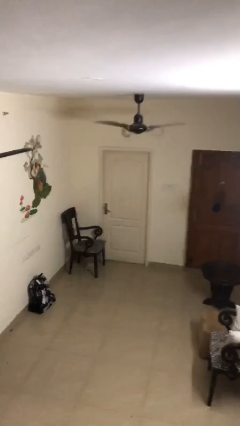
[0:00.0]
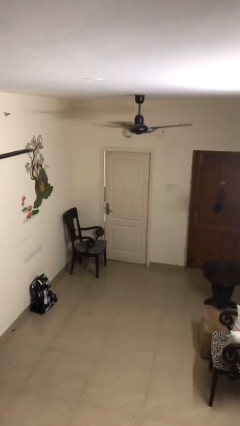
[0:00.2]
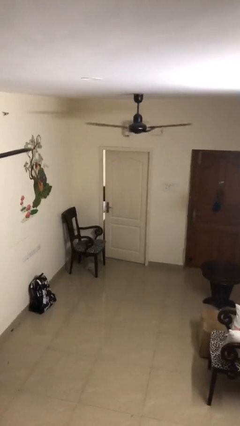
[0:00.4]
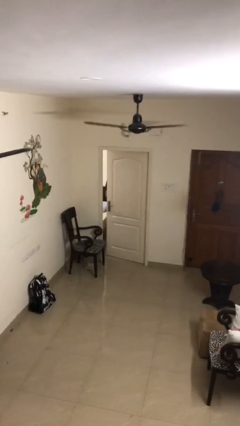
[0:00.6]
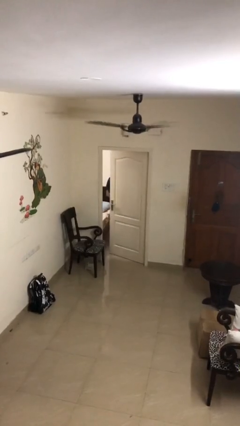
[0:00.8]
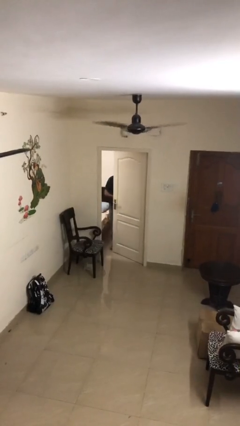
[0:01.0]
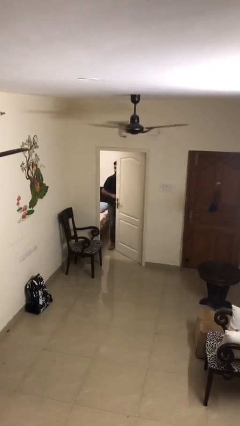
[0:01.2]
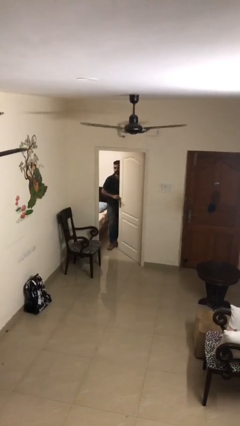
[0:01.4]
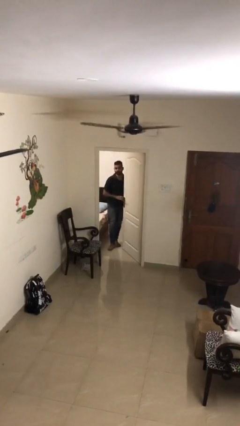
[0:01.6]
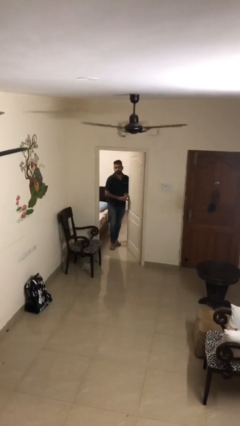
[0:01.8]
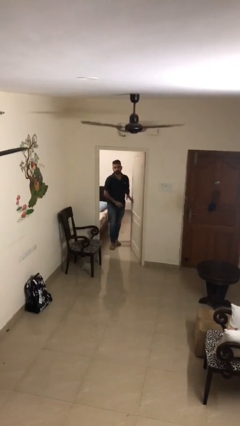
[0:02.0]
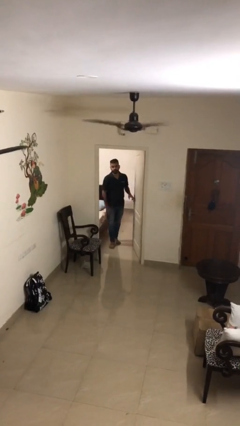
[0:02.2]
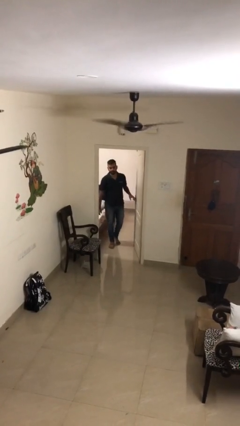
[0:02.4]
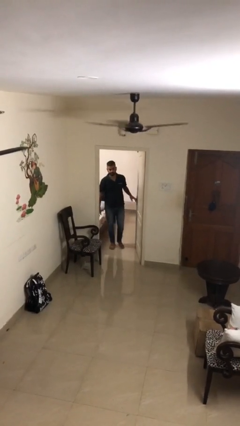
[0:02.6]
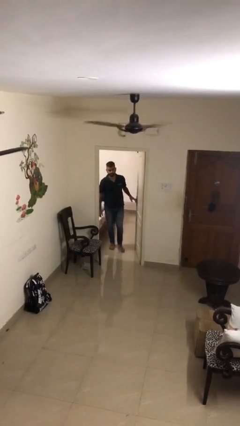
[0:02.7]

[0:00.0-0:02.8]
person opens facility door

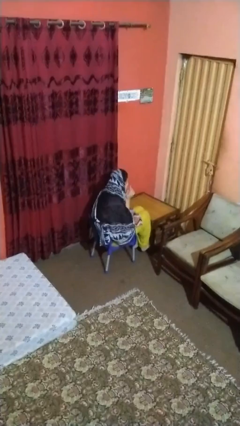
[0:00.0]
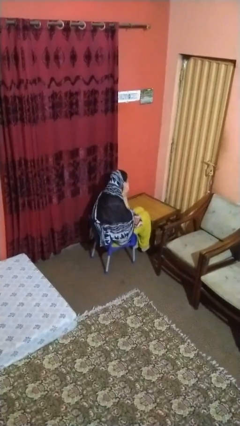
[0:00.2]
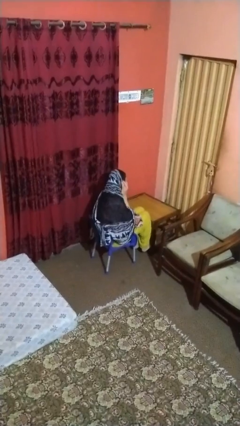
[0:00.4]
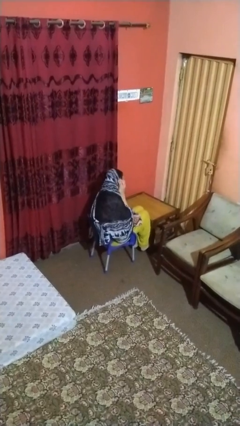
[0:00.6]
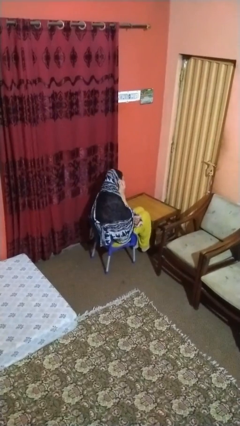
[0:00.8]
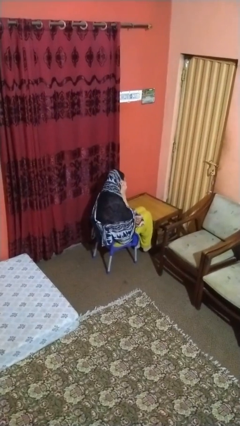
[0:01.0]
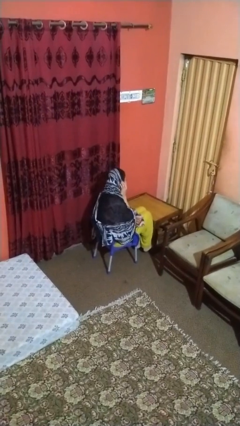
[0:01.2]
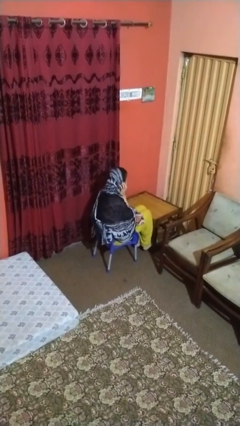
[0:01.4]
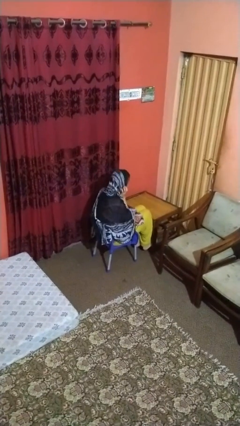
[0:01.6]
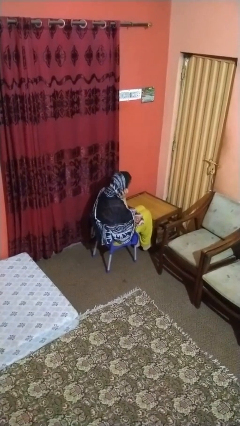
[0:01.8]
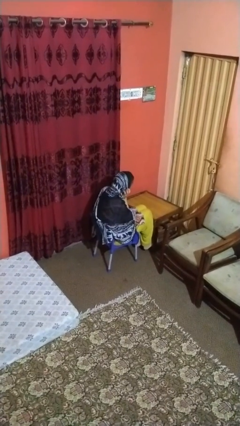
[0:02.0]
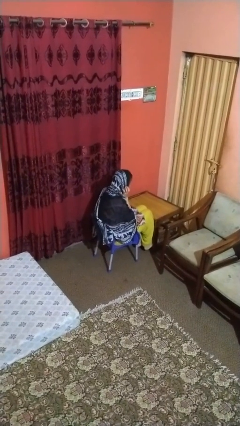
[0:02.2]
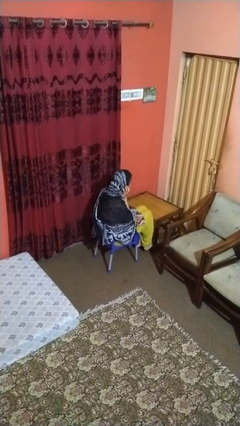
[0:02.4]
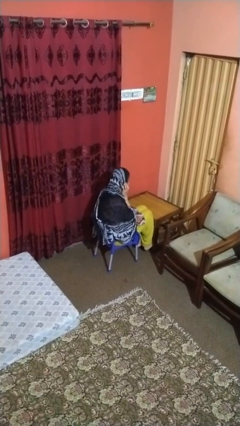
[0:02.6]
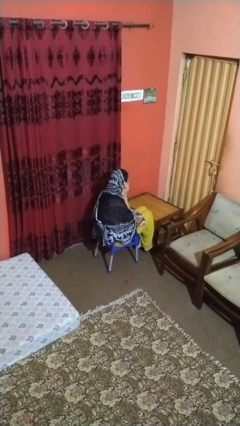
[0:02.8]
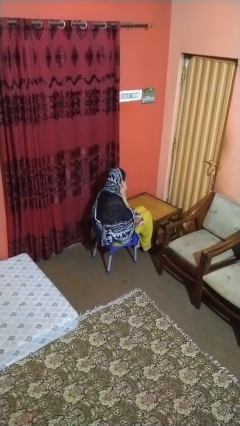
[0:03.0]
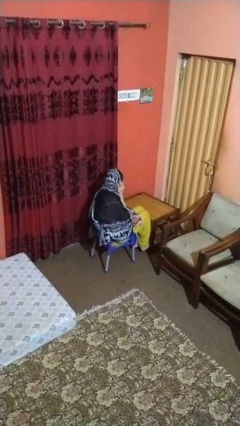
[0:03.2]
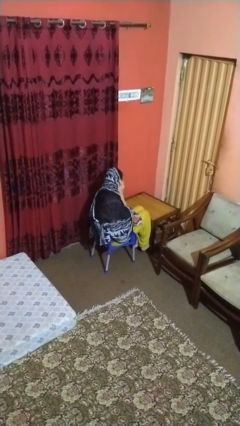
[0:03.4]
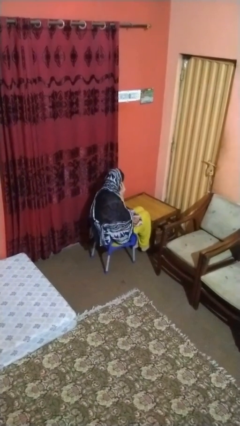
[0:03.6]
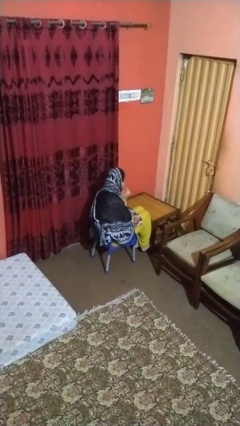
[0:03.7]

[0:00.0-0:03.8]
person puts fingers in ear

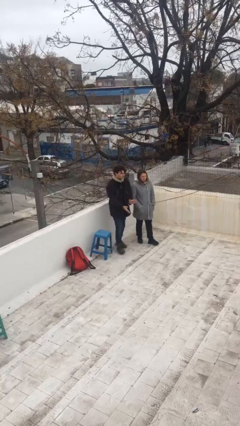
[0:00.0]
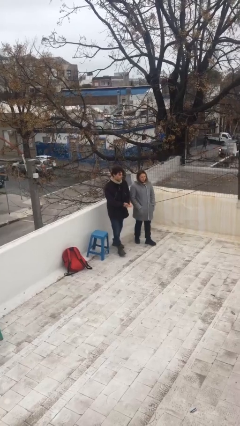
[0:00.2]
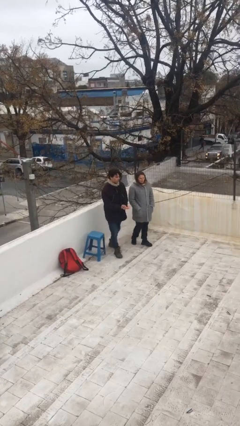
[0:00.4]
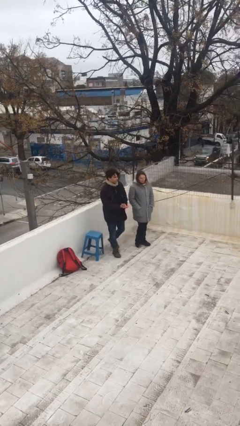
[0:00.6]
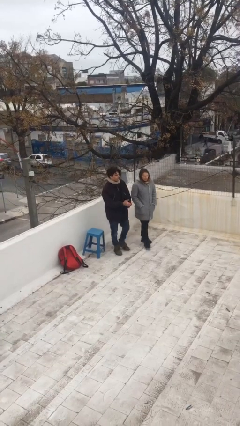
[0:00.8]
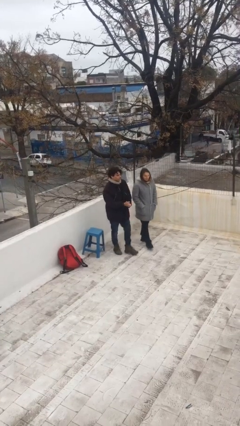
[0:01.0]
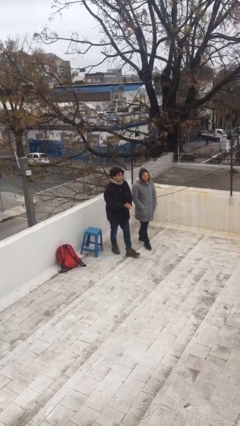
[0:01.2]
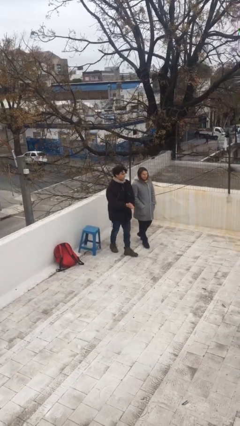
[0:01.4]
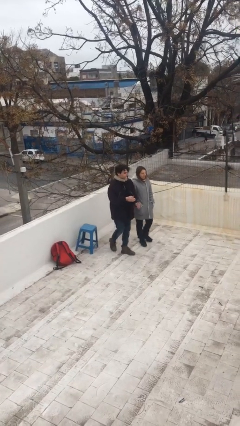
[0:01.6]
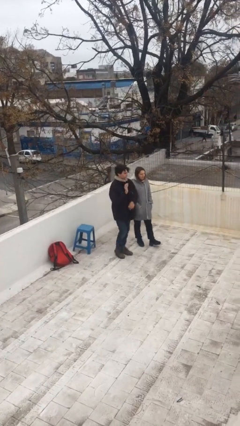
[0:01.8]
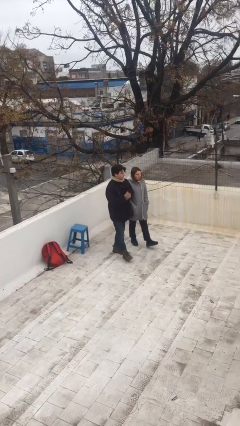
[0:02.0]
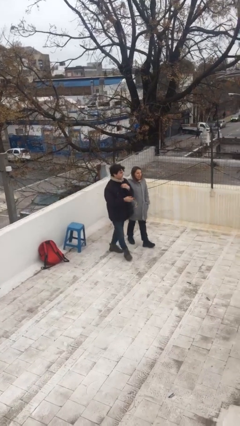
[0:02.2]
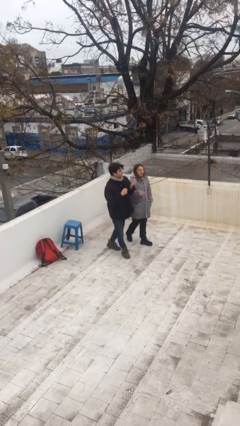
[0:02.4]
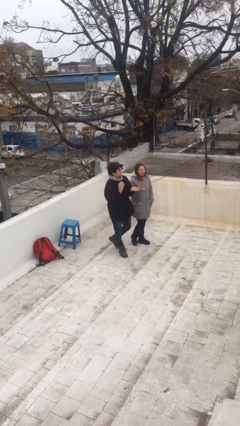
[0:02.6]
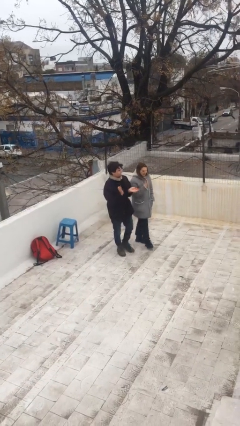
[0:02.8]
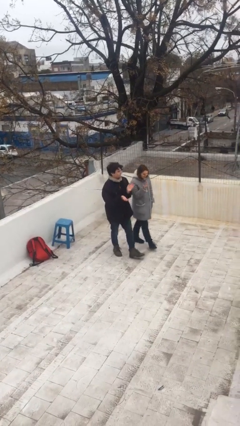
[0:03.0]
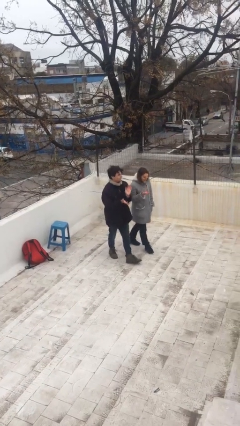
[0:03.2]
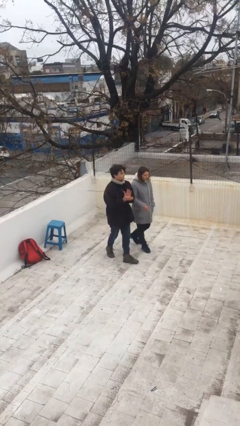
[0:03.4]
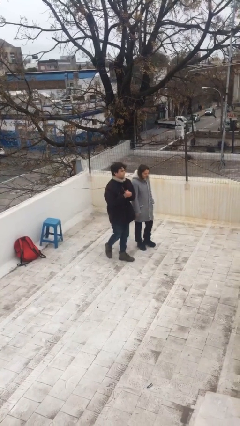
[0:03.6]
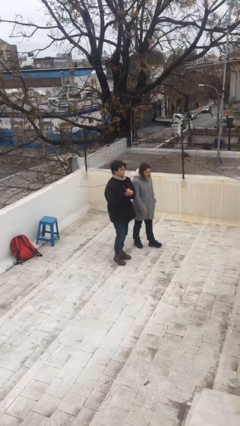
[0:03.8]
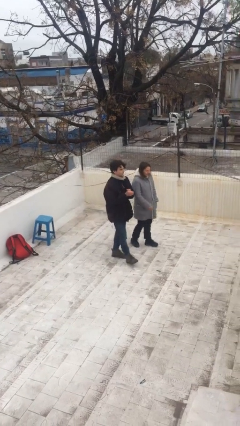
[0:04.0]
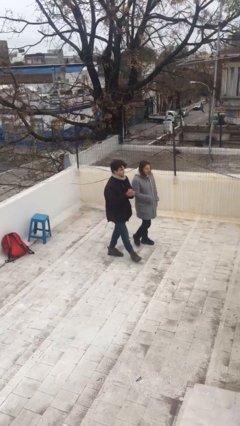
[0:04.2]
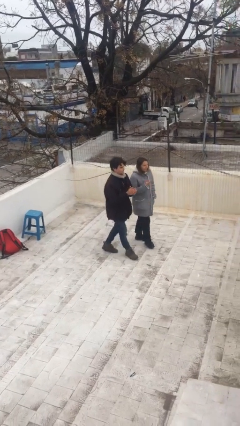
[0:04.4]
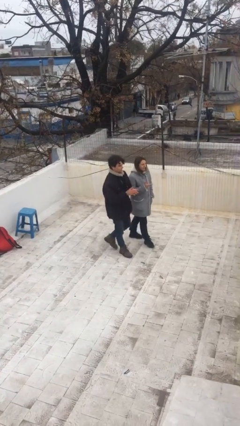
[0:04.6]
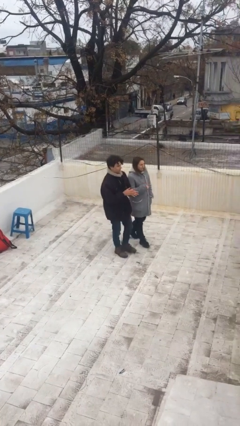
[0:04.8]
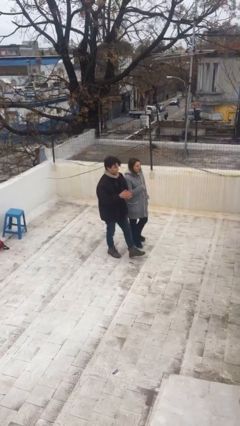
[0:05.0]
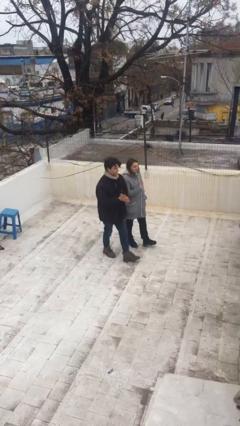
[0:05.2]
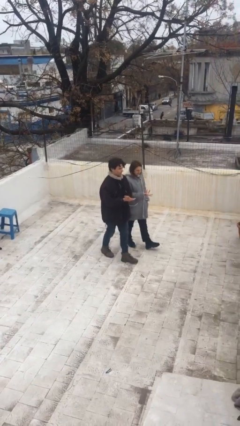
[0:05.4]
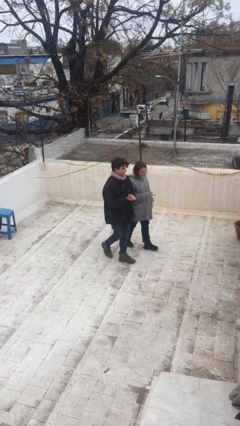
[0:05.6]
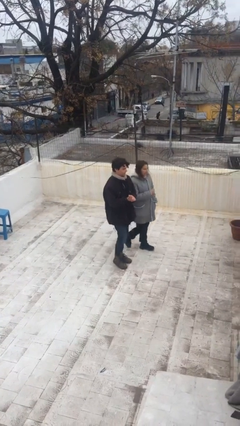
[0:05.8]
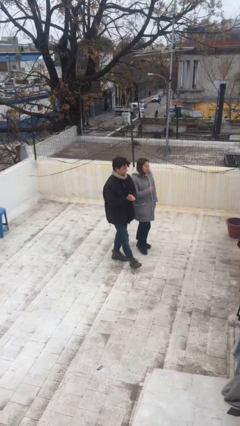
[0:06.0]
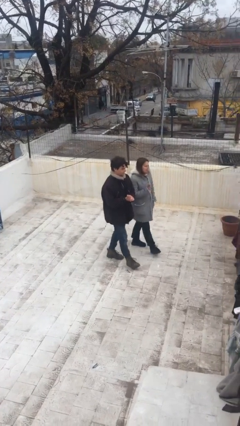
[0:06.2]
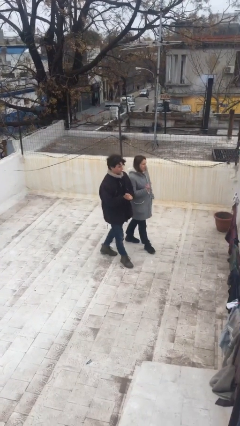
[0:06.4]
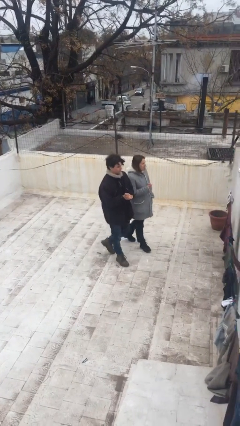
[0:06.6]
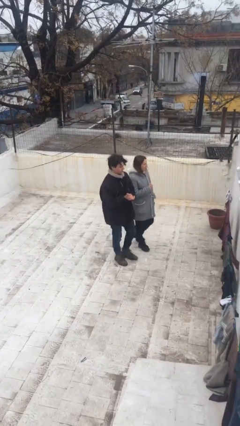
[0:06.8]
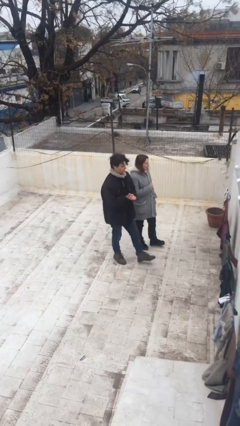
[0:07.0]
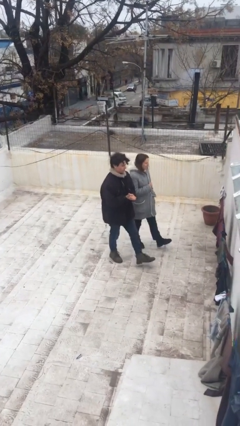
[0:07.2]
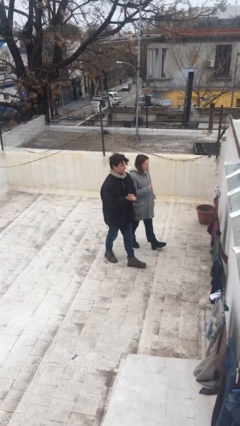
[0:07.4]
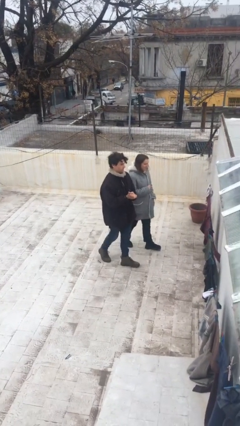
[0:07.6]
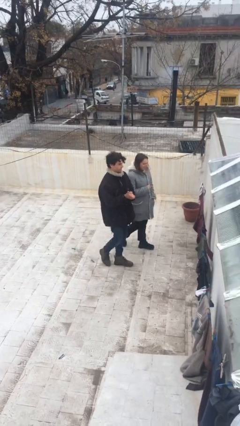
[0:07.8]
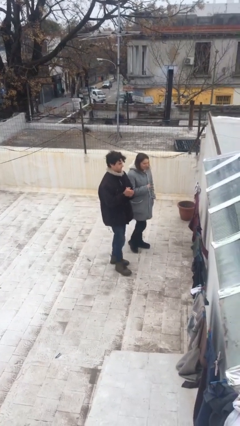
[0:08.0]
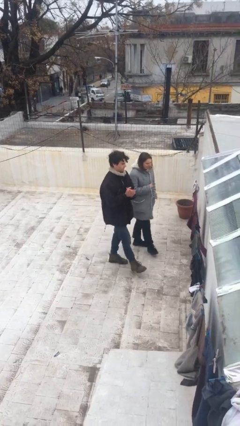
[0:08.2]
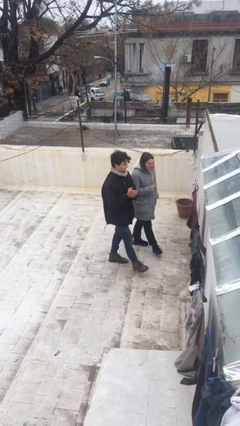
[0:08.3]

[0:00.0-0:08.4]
person talks to person

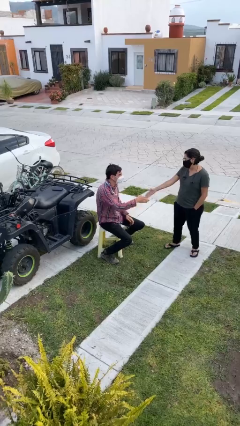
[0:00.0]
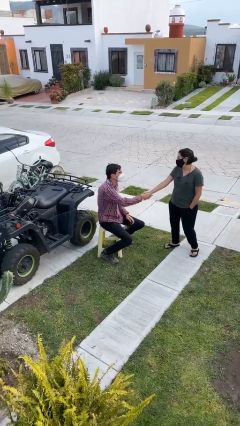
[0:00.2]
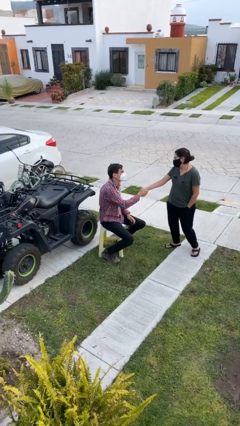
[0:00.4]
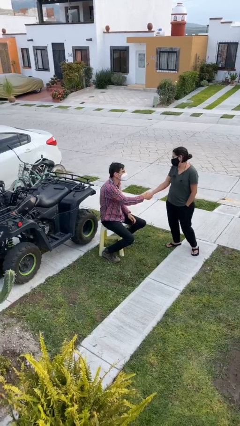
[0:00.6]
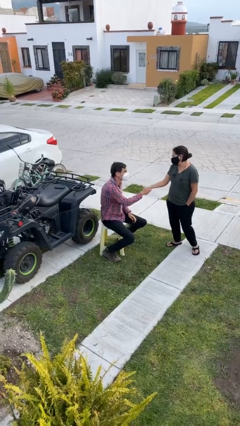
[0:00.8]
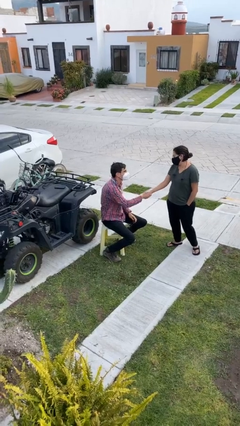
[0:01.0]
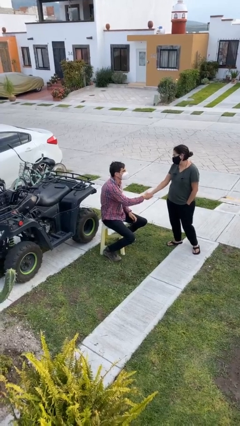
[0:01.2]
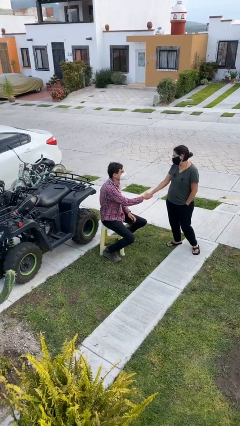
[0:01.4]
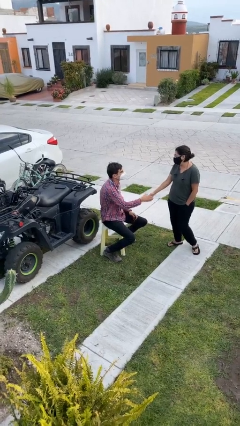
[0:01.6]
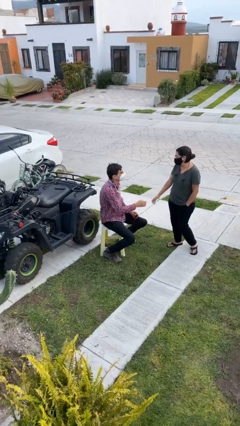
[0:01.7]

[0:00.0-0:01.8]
person shakes hand

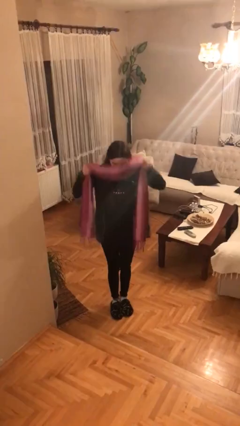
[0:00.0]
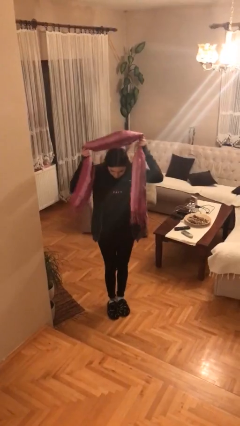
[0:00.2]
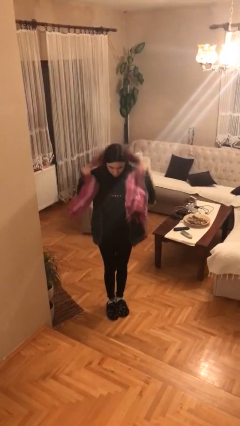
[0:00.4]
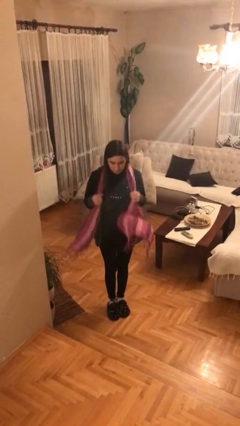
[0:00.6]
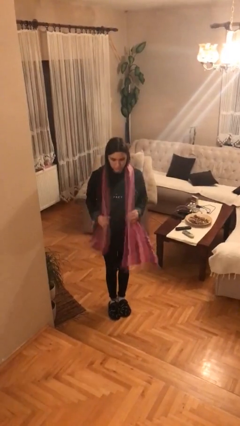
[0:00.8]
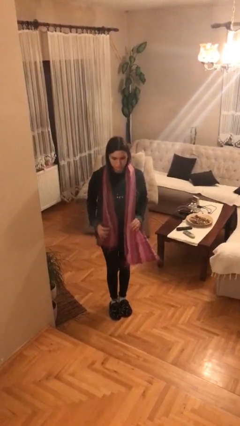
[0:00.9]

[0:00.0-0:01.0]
person puts on scarf
